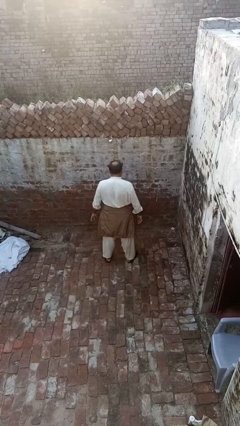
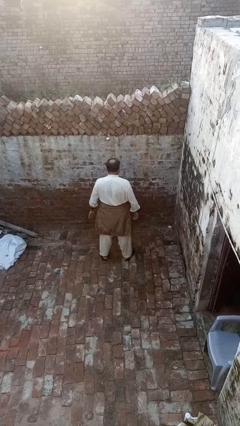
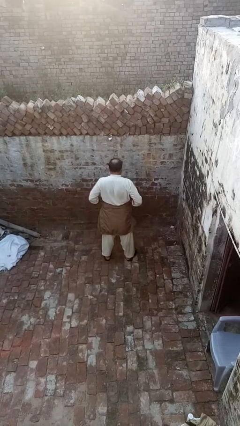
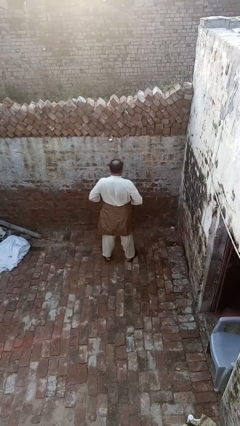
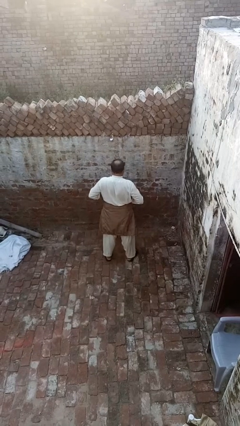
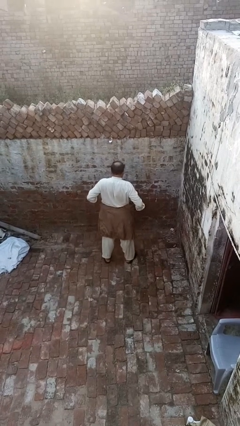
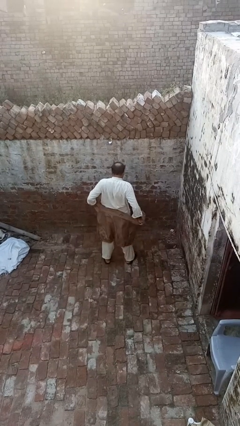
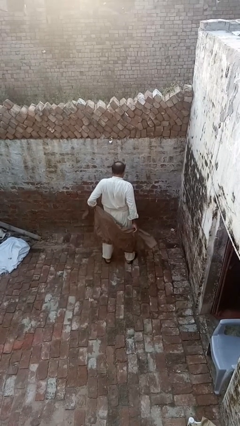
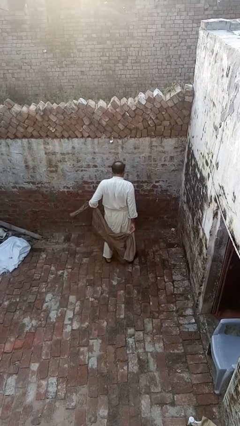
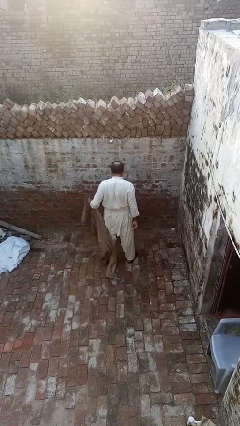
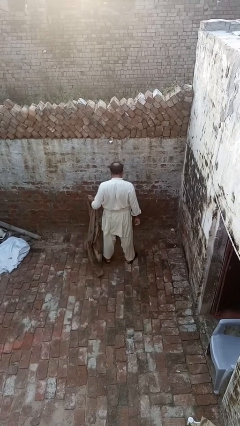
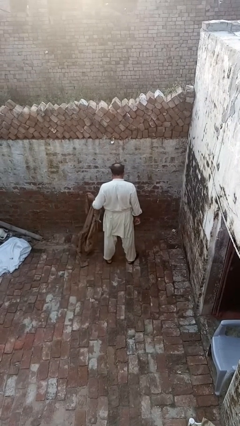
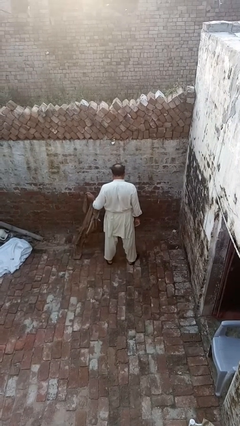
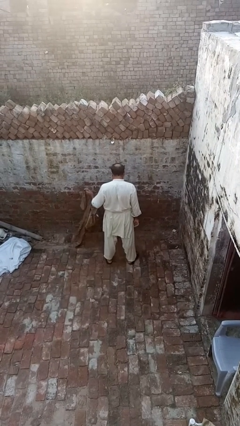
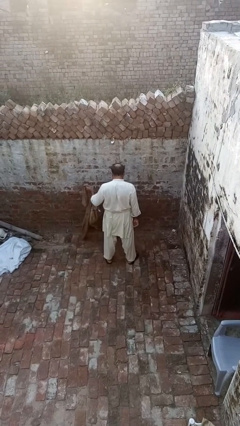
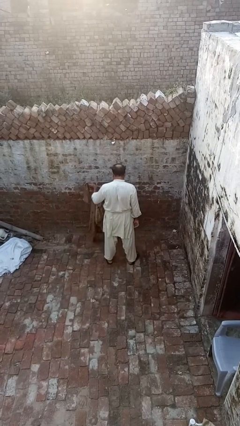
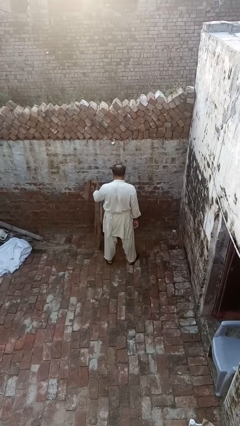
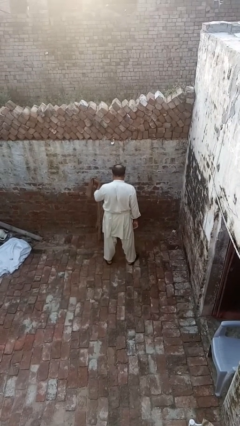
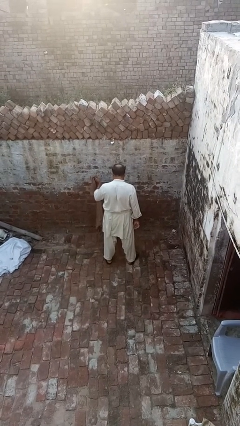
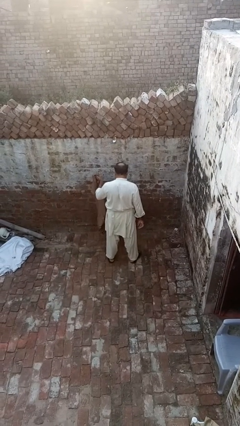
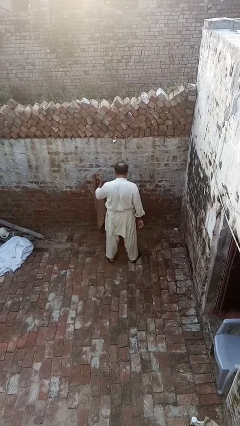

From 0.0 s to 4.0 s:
person unties jacket around waist

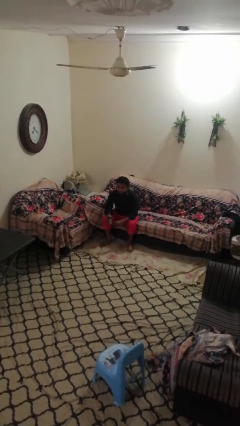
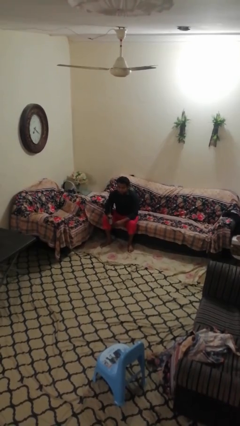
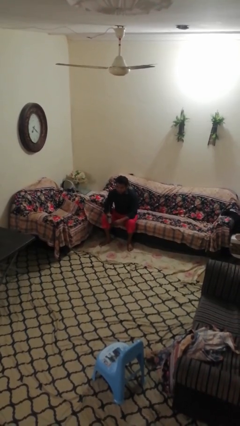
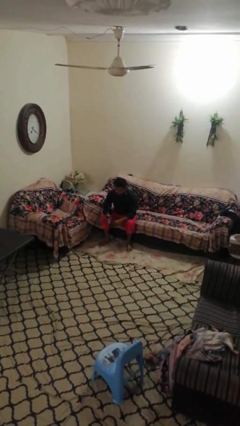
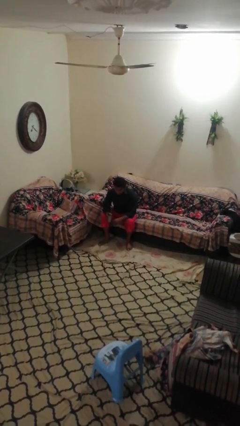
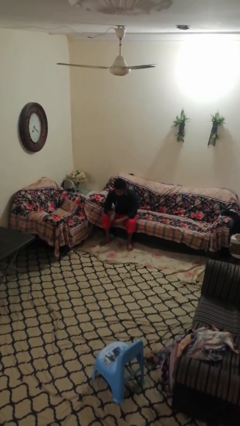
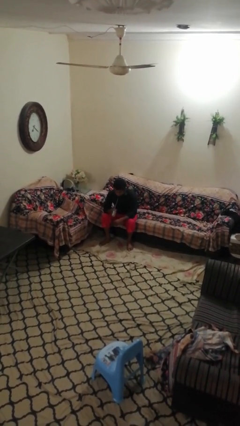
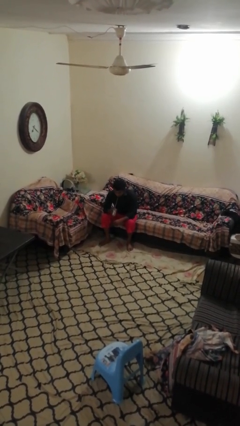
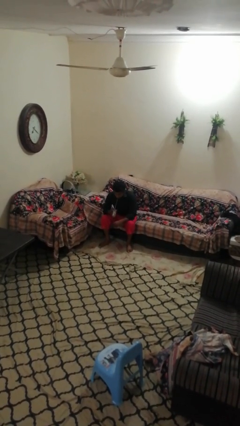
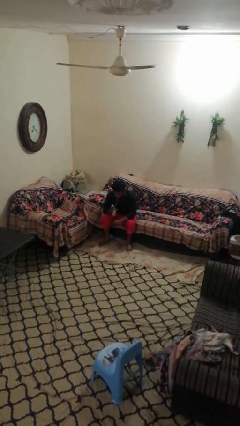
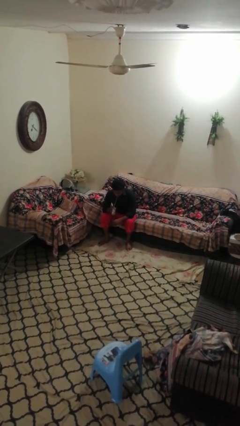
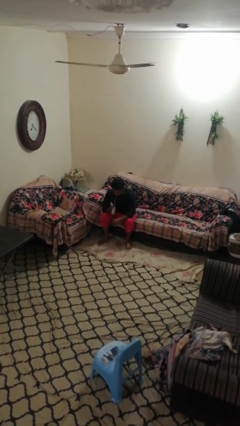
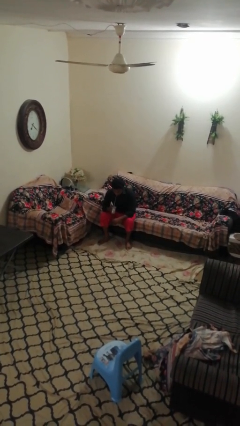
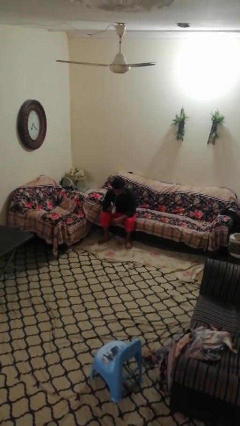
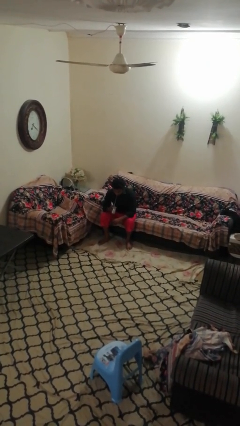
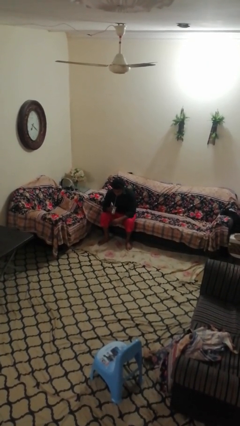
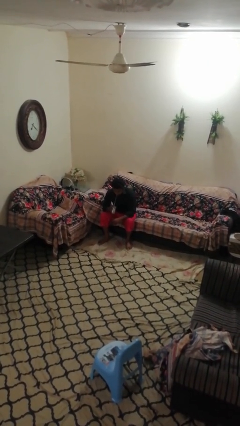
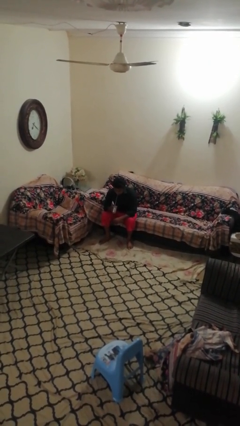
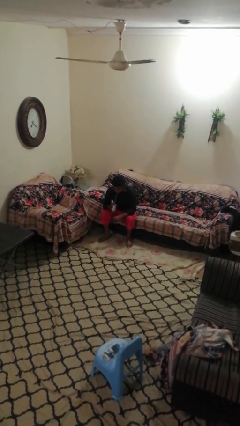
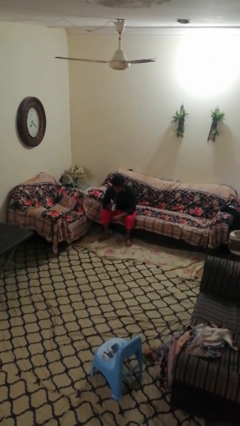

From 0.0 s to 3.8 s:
person drinks from straw

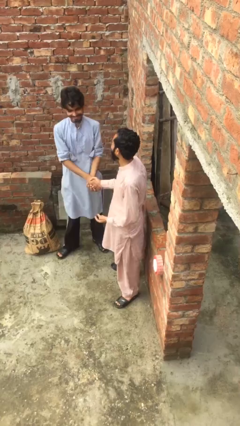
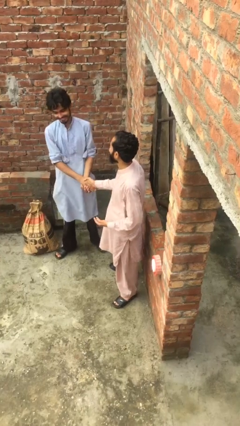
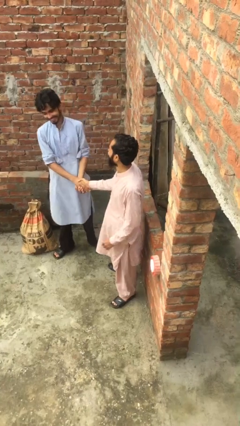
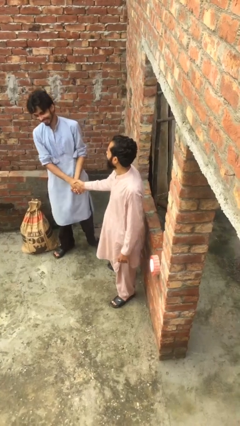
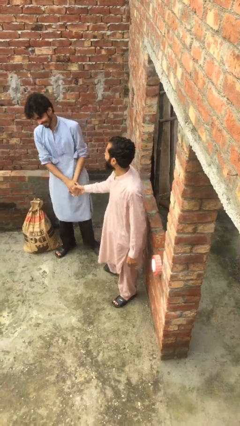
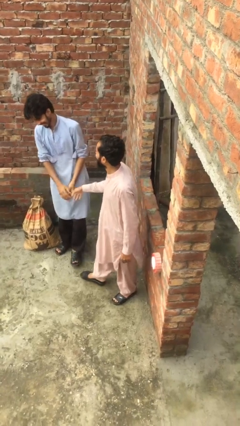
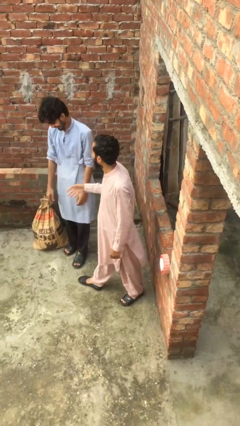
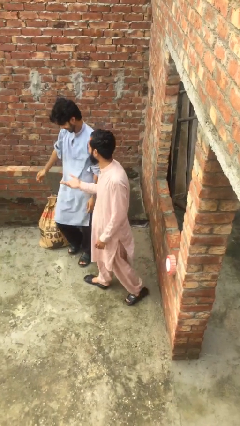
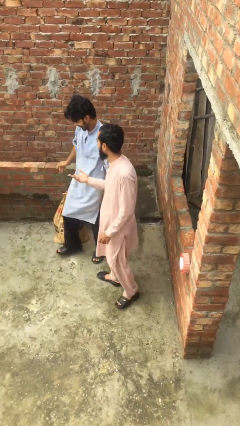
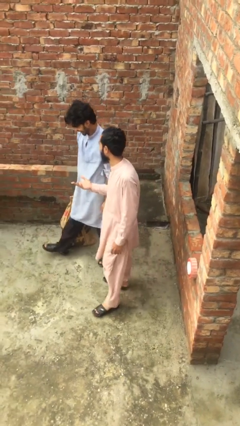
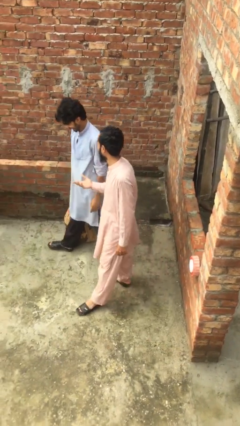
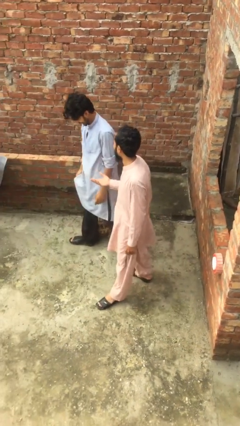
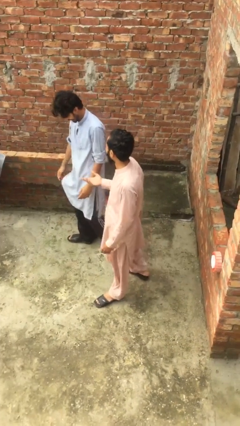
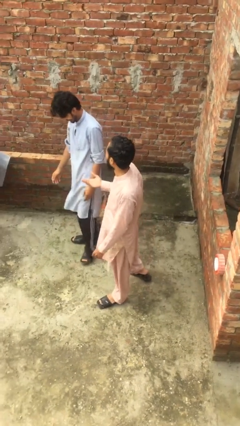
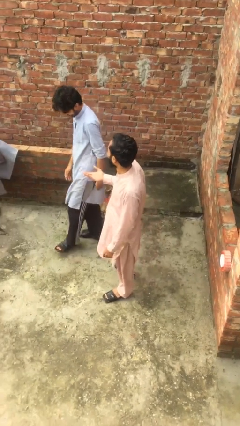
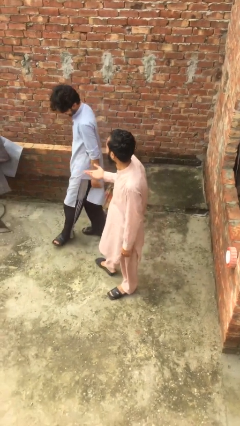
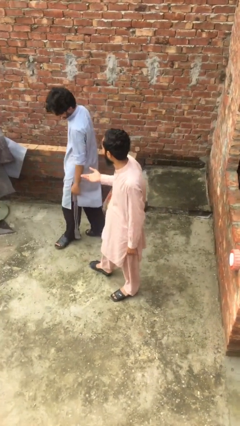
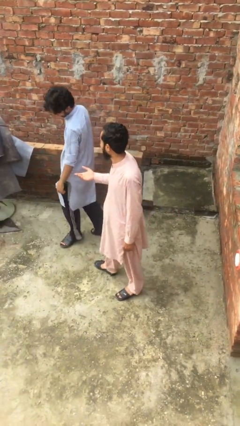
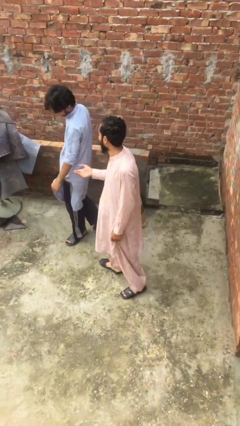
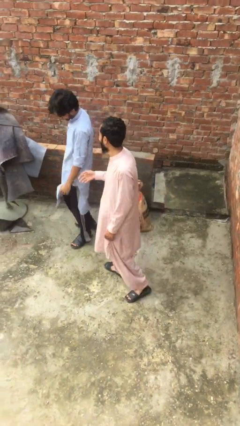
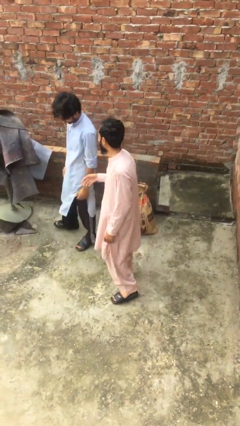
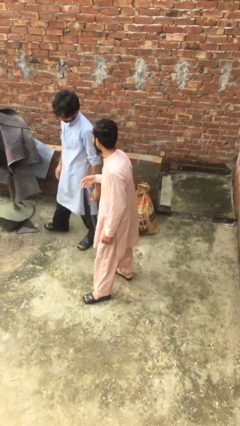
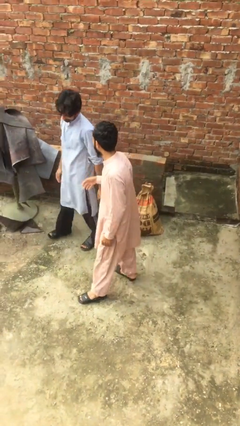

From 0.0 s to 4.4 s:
person talks to person

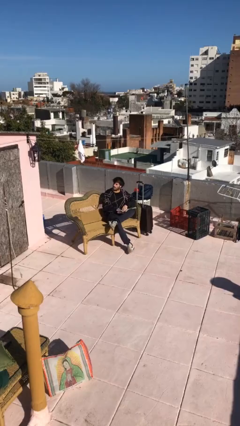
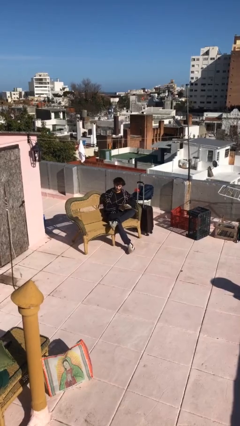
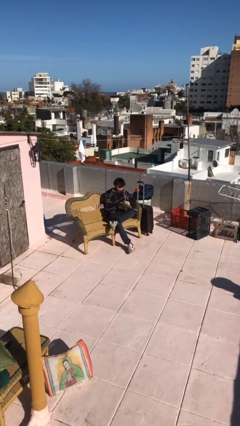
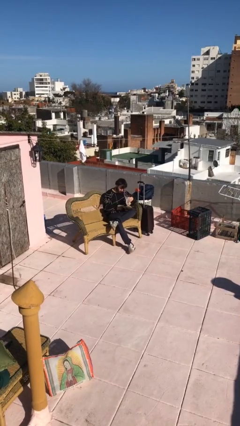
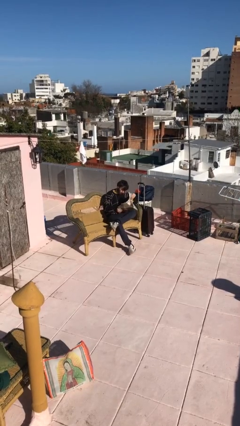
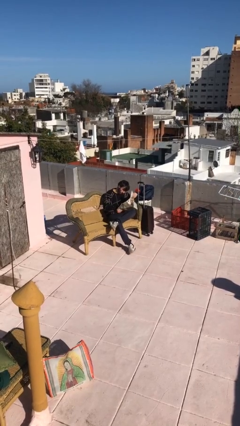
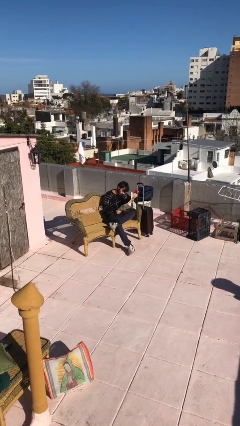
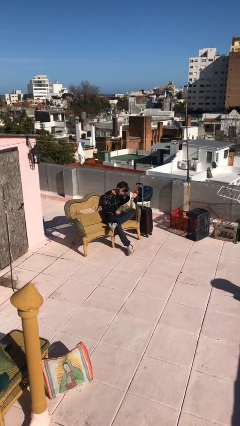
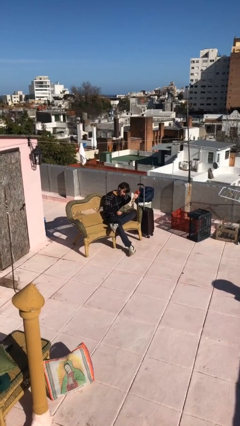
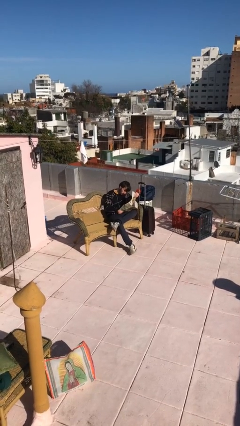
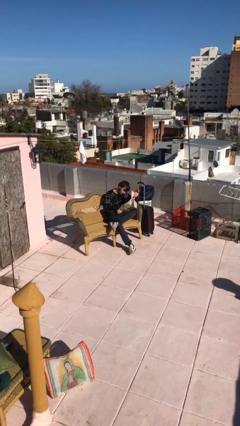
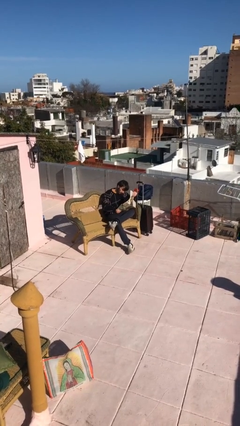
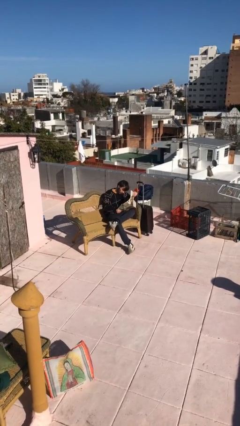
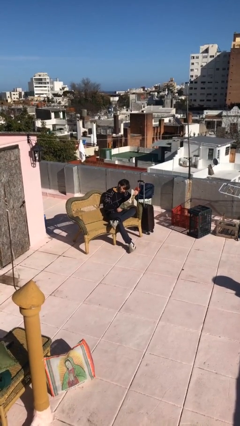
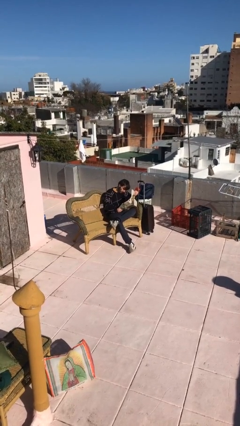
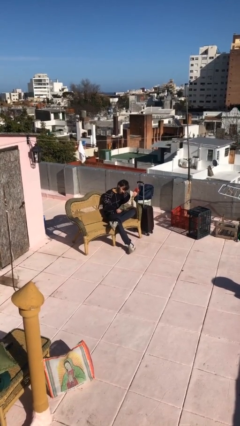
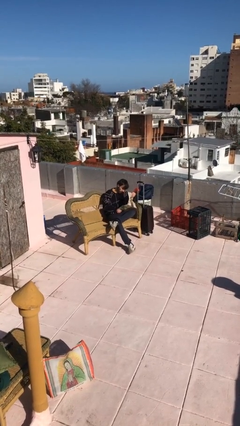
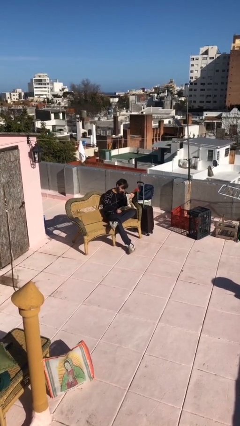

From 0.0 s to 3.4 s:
person reads newspaper

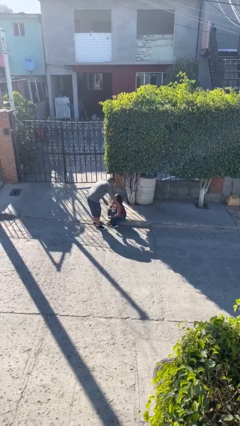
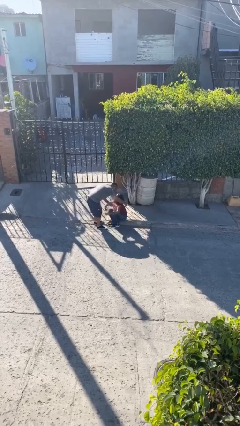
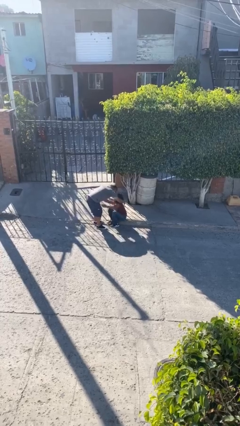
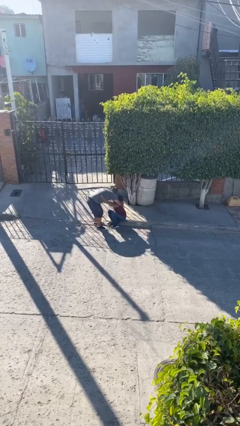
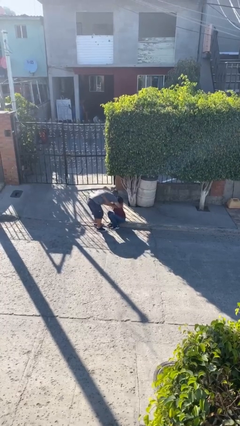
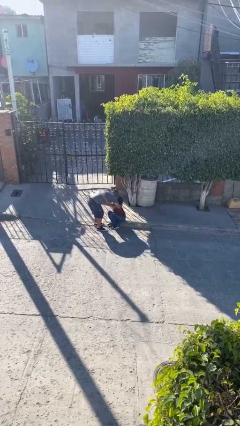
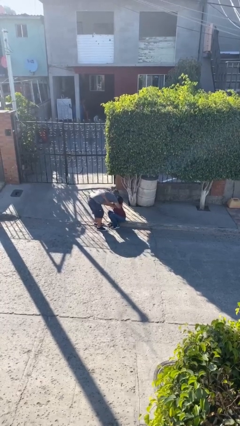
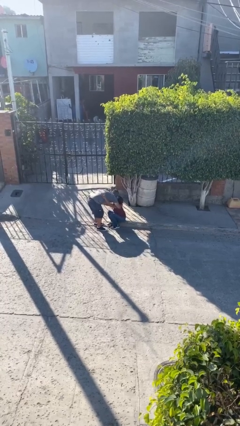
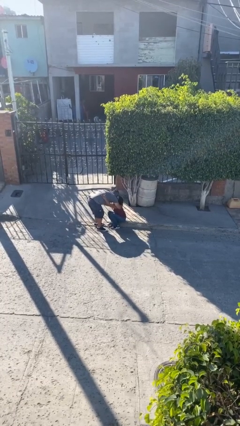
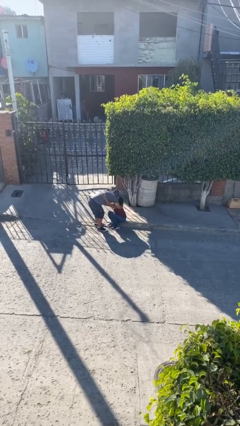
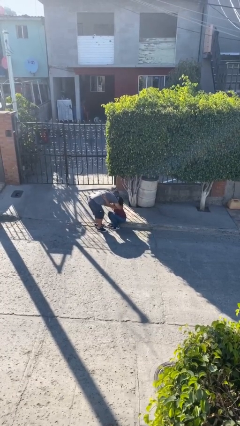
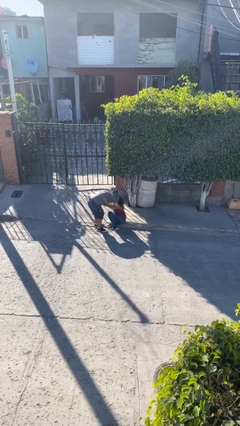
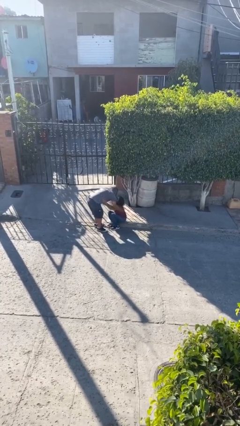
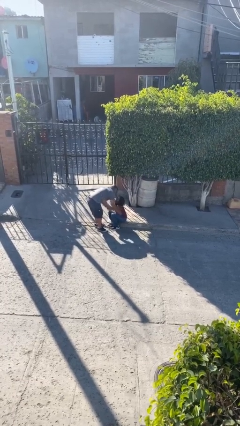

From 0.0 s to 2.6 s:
person embraces person
